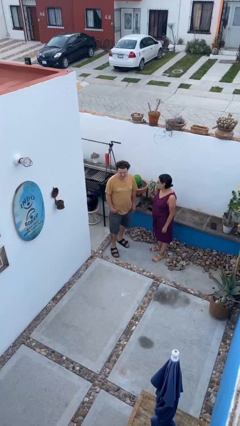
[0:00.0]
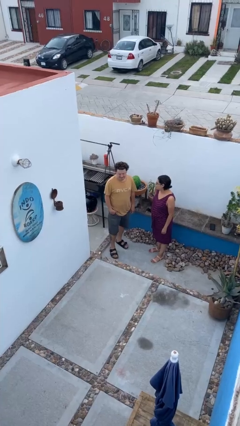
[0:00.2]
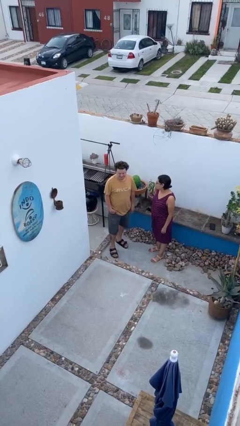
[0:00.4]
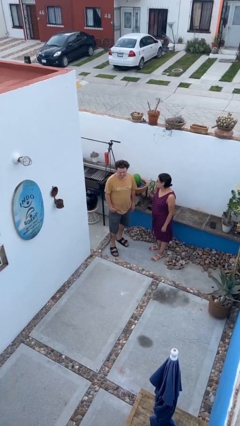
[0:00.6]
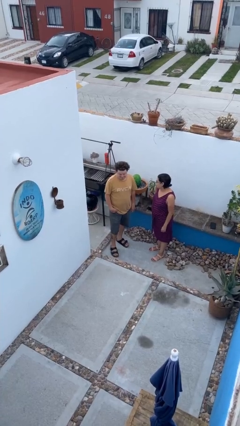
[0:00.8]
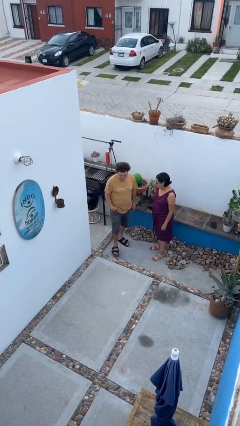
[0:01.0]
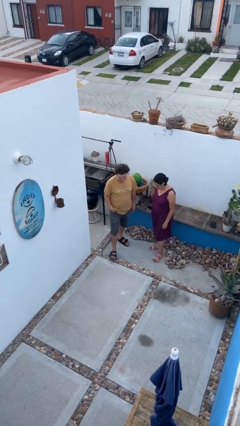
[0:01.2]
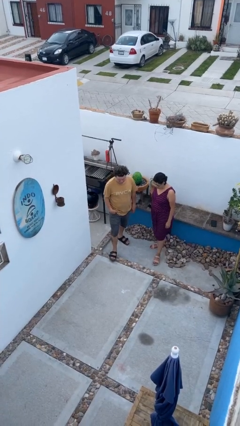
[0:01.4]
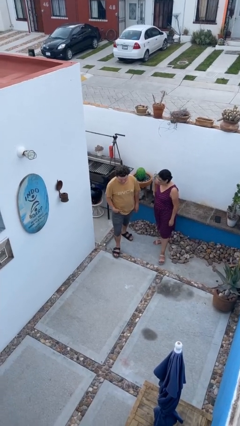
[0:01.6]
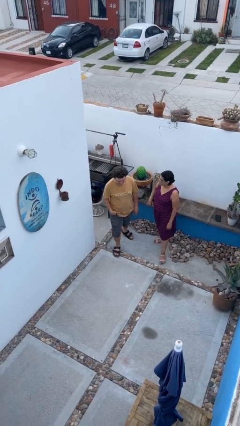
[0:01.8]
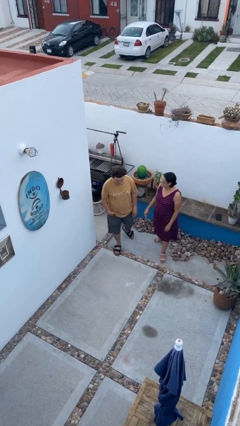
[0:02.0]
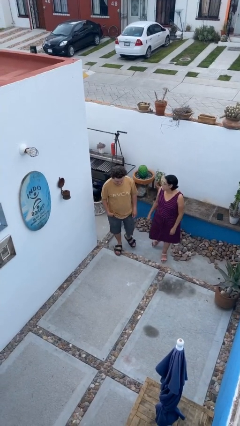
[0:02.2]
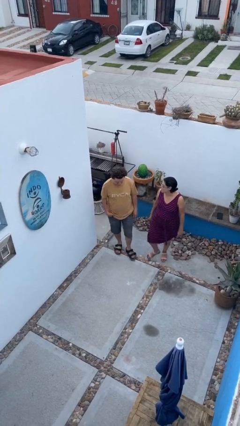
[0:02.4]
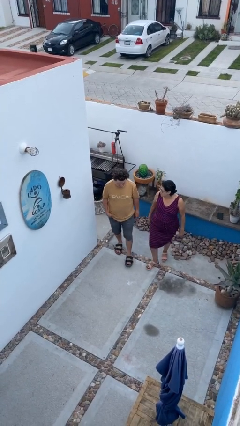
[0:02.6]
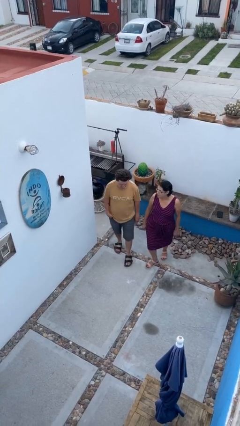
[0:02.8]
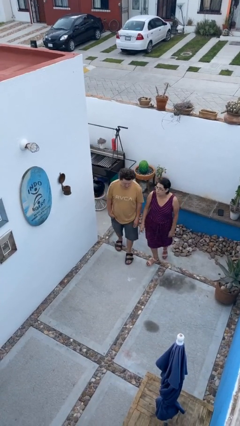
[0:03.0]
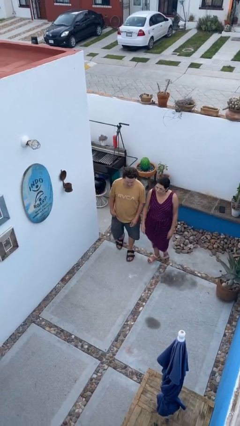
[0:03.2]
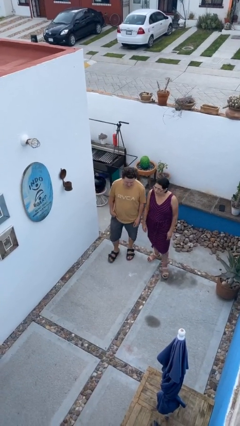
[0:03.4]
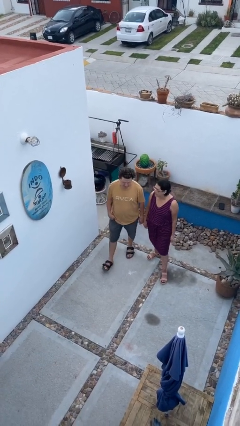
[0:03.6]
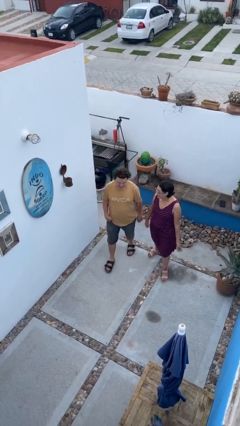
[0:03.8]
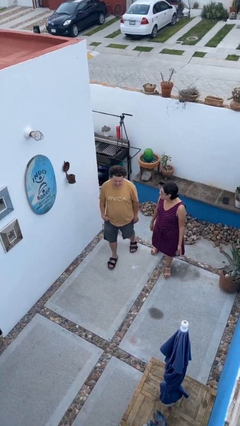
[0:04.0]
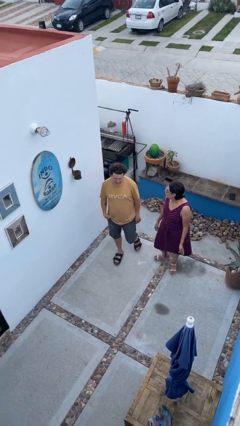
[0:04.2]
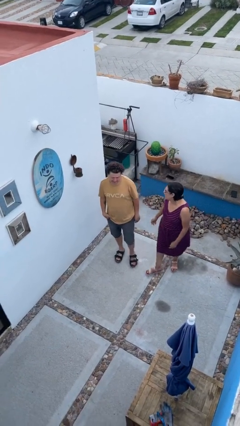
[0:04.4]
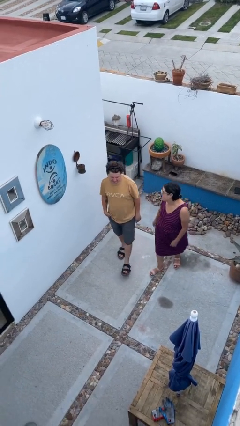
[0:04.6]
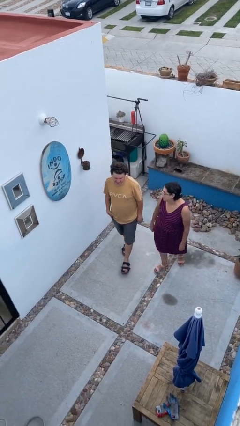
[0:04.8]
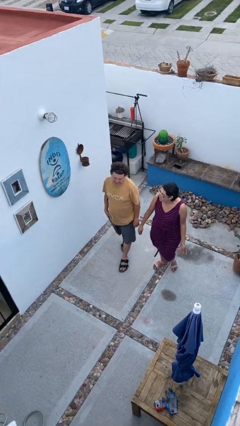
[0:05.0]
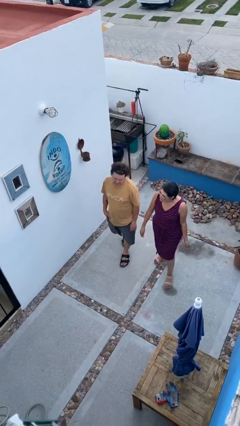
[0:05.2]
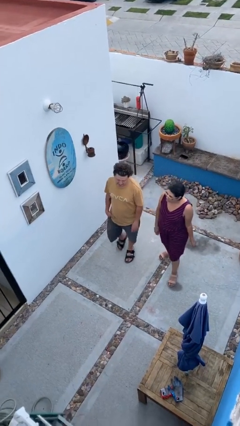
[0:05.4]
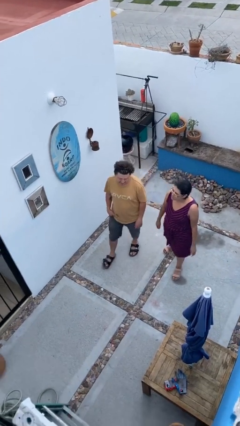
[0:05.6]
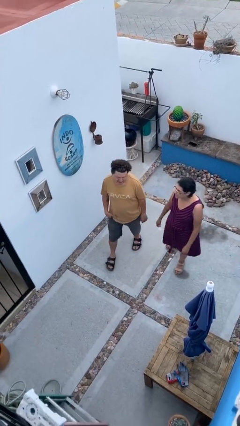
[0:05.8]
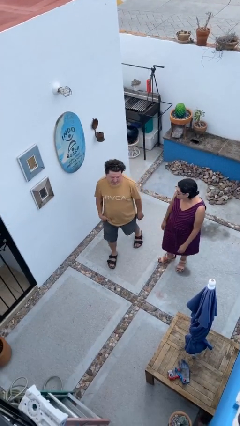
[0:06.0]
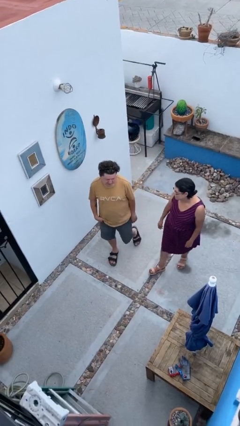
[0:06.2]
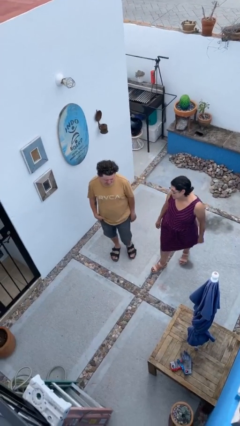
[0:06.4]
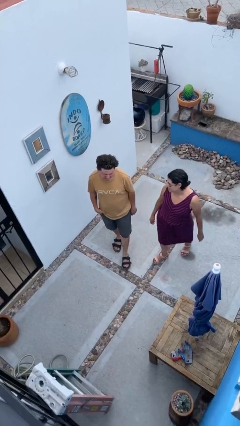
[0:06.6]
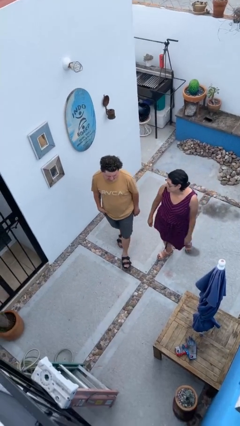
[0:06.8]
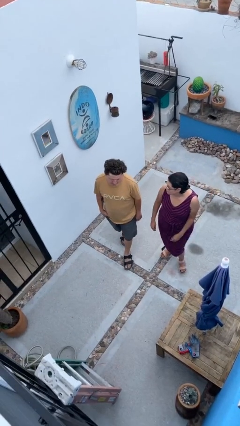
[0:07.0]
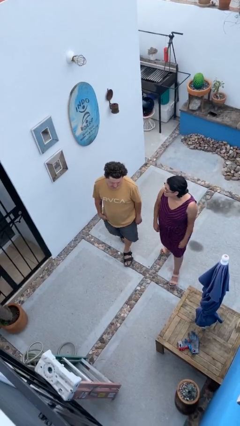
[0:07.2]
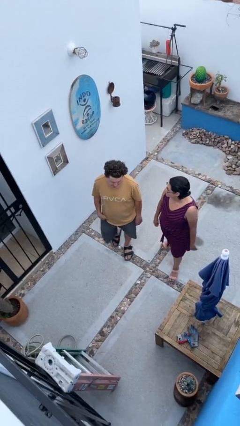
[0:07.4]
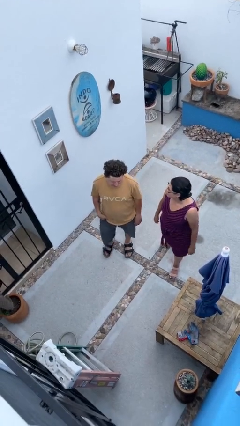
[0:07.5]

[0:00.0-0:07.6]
person talks to person

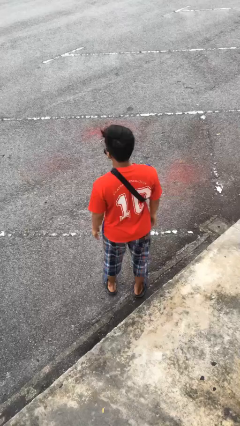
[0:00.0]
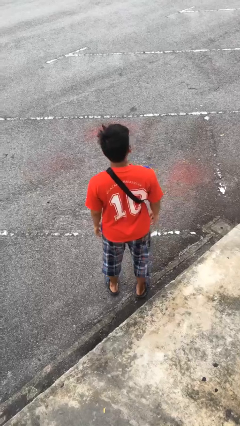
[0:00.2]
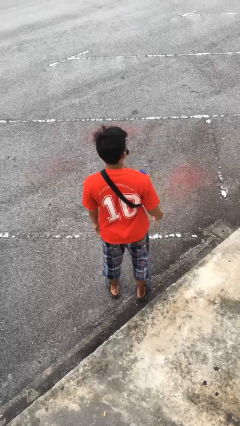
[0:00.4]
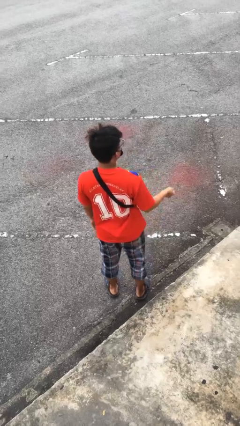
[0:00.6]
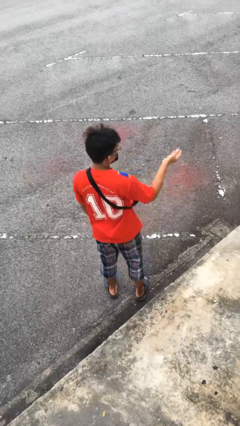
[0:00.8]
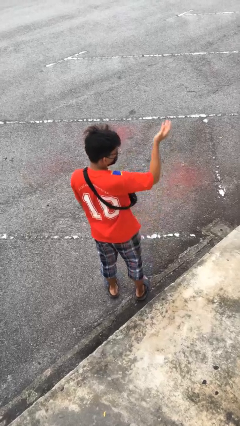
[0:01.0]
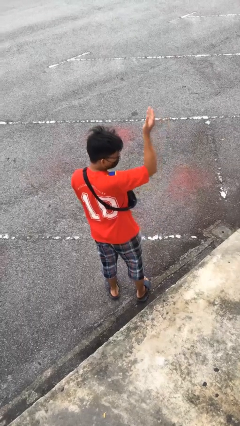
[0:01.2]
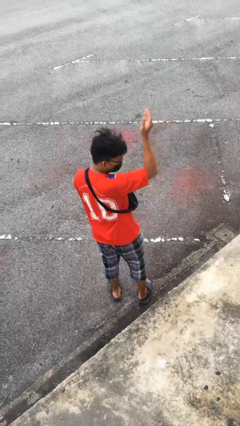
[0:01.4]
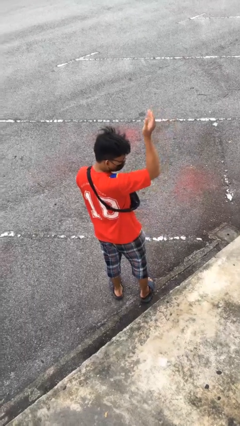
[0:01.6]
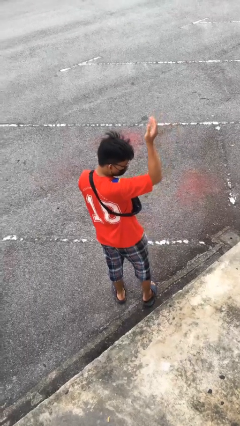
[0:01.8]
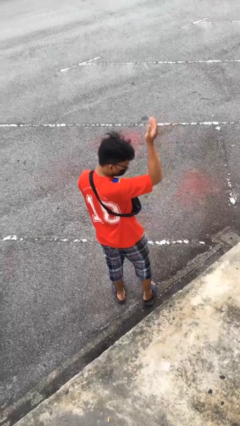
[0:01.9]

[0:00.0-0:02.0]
person gestures swipe up

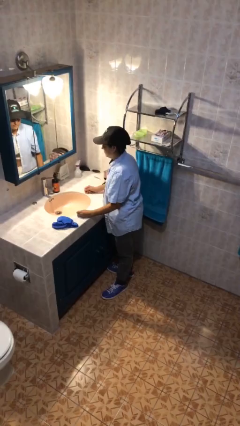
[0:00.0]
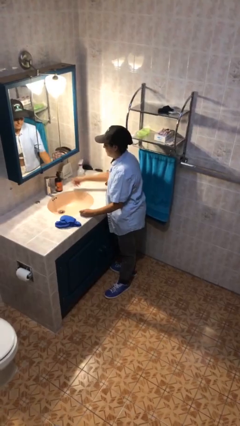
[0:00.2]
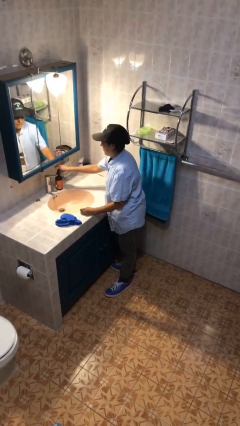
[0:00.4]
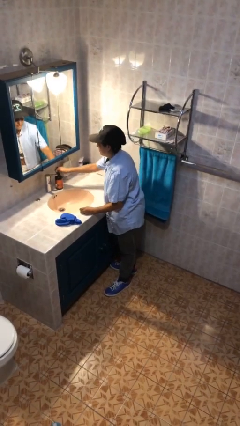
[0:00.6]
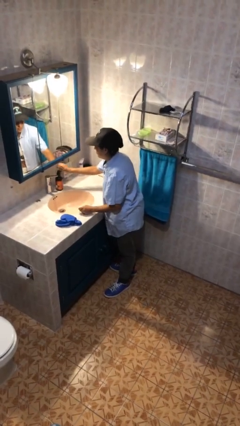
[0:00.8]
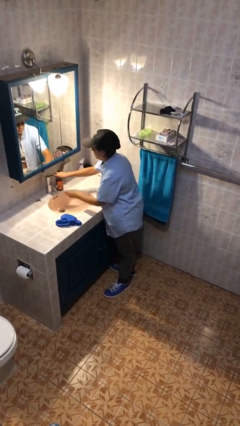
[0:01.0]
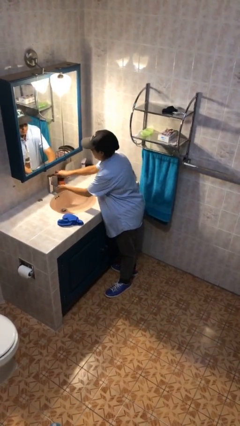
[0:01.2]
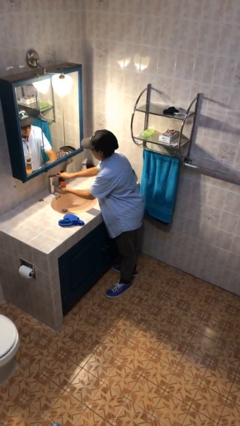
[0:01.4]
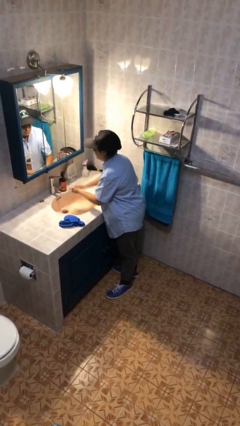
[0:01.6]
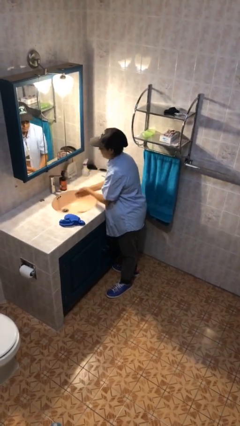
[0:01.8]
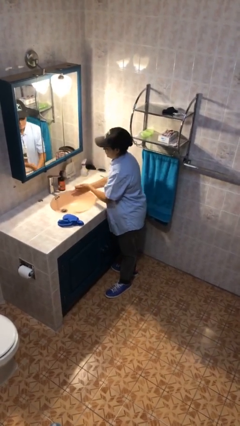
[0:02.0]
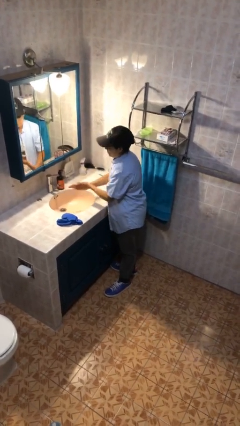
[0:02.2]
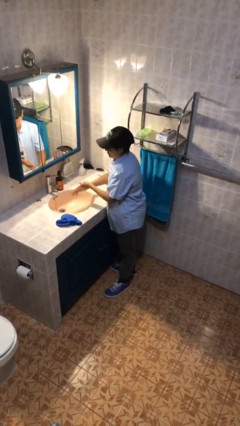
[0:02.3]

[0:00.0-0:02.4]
person washes hands

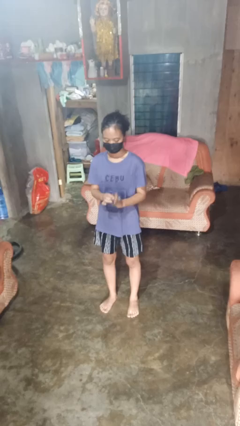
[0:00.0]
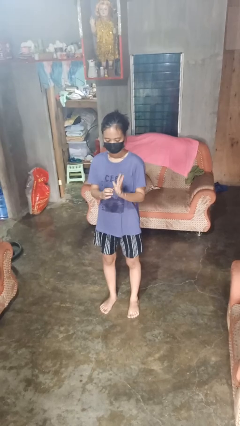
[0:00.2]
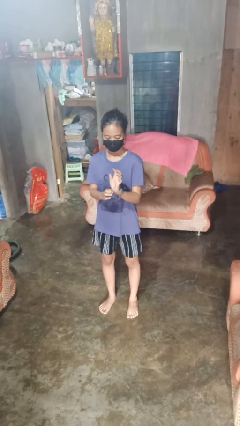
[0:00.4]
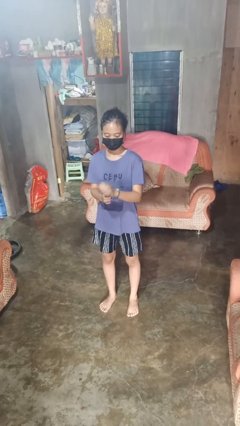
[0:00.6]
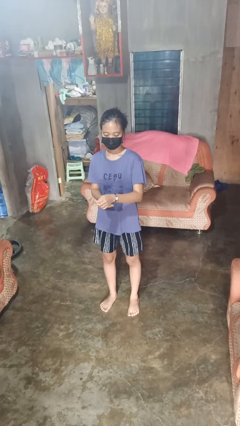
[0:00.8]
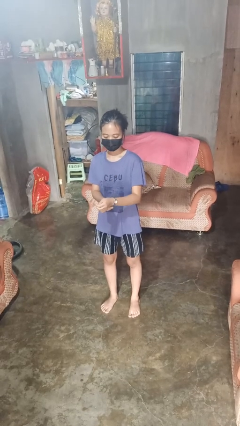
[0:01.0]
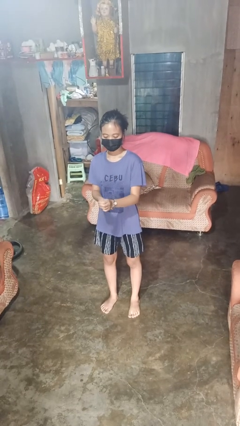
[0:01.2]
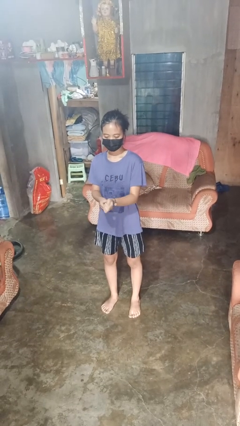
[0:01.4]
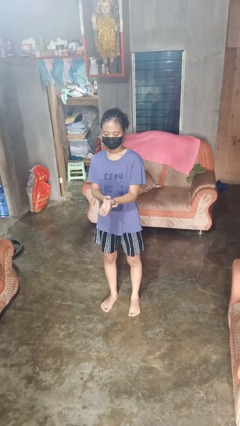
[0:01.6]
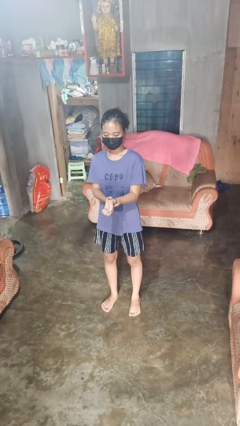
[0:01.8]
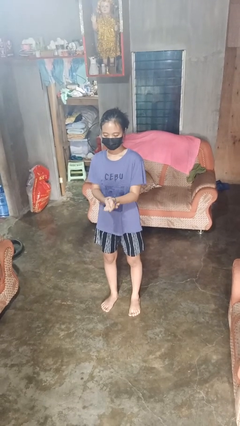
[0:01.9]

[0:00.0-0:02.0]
person puts on wristwatch

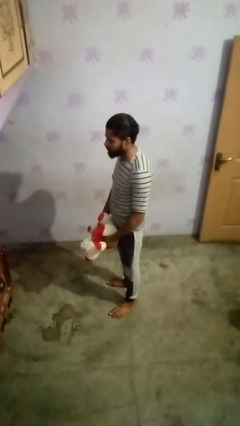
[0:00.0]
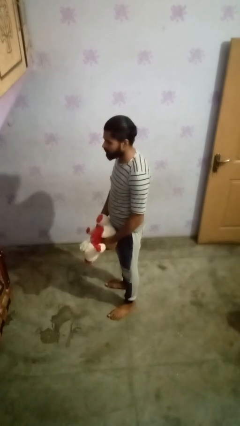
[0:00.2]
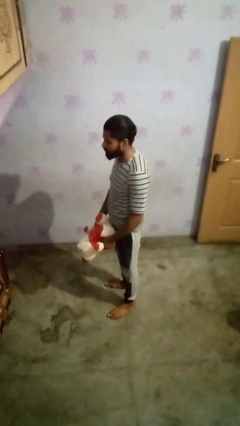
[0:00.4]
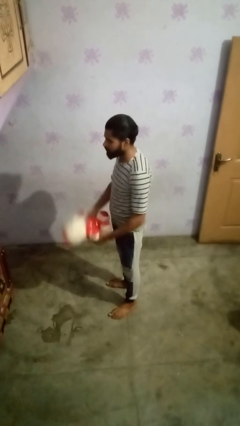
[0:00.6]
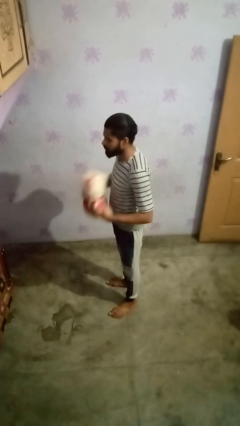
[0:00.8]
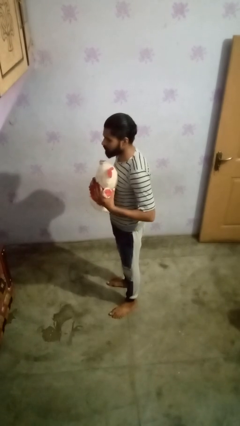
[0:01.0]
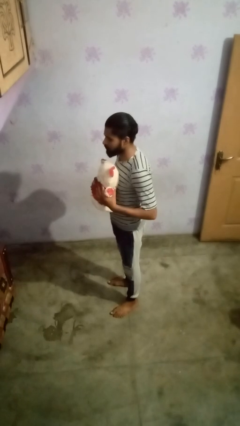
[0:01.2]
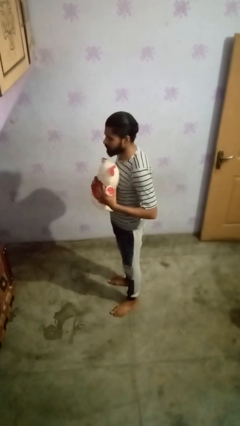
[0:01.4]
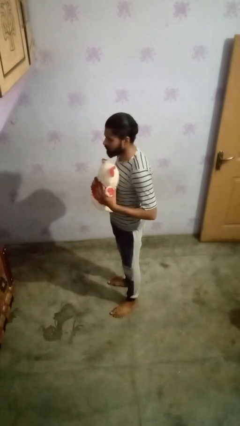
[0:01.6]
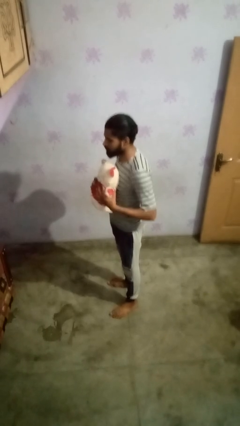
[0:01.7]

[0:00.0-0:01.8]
person hugs stuffed animal

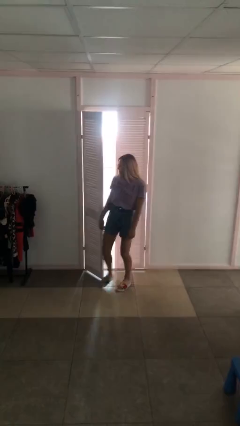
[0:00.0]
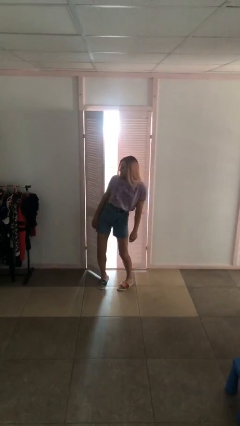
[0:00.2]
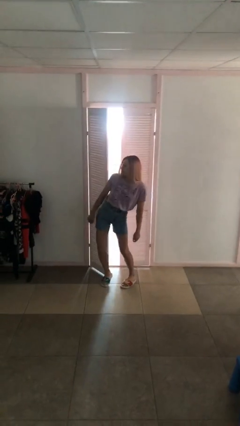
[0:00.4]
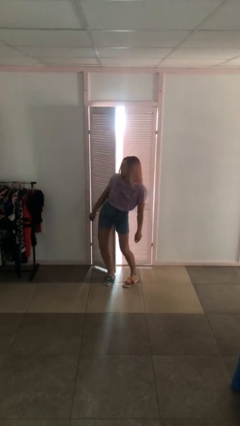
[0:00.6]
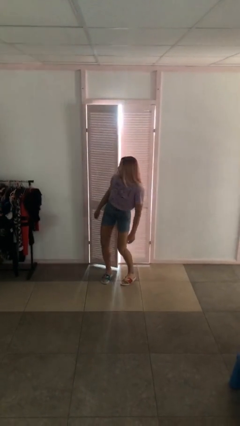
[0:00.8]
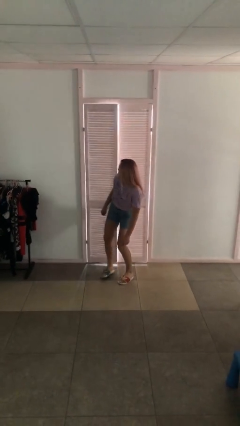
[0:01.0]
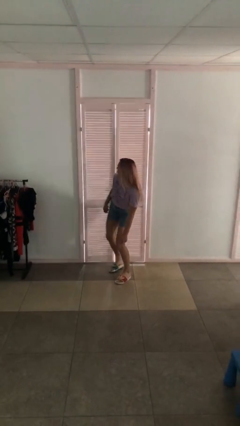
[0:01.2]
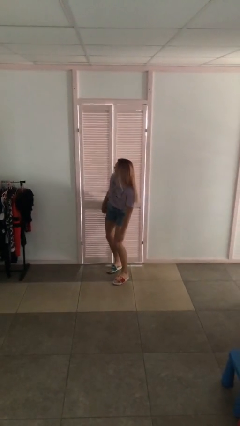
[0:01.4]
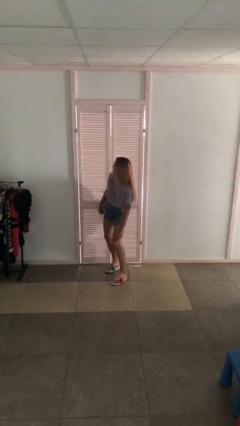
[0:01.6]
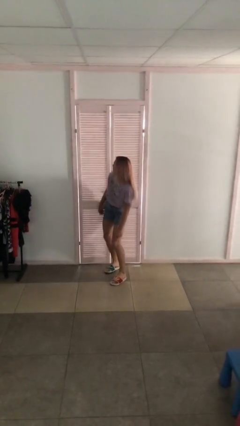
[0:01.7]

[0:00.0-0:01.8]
person closes door with hip
